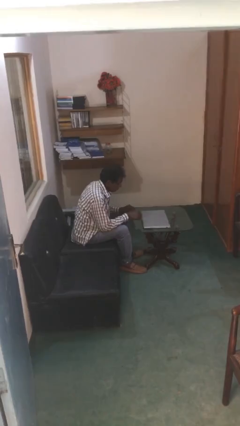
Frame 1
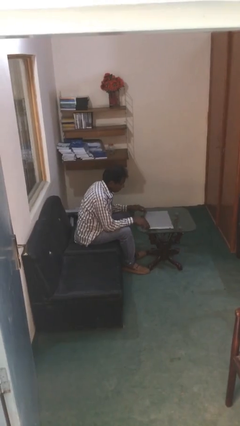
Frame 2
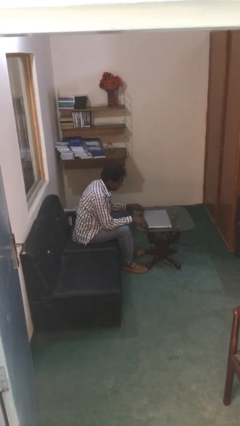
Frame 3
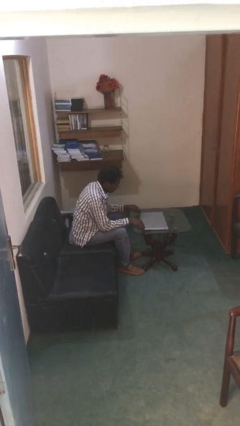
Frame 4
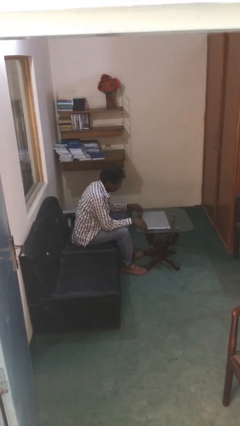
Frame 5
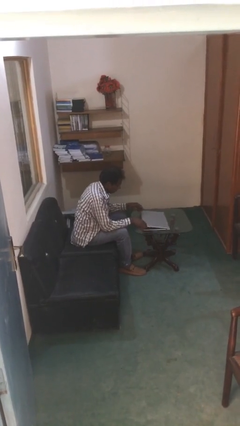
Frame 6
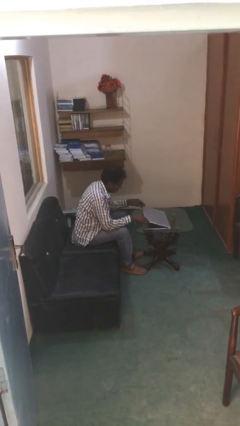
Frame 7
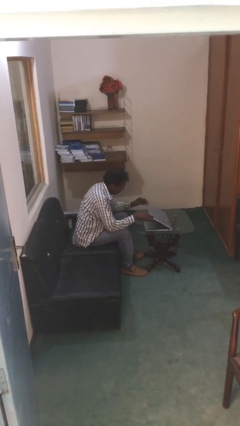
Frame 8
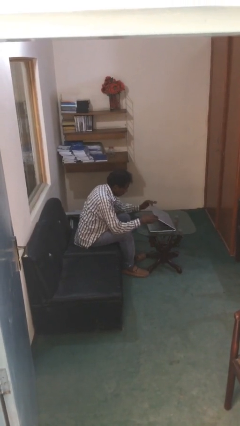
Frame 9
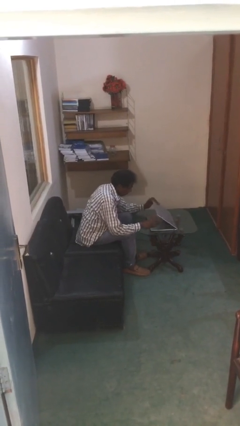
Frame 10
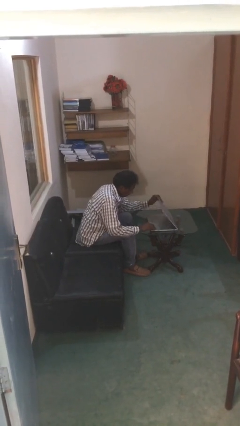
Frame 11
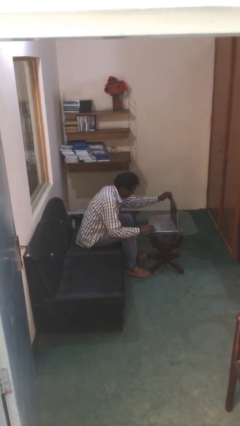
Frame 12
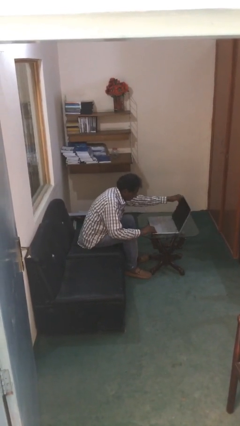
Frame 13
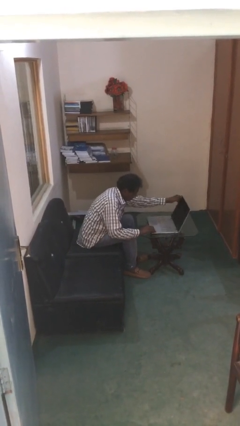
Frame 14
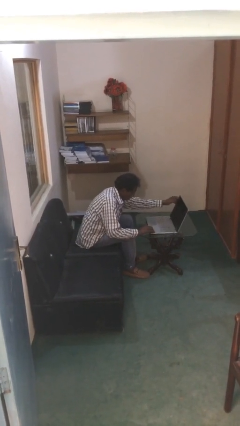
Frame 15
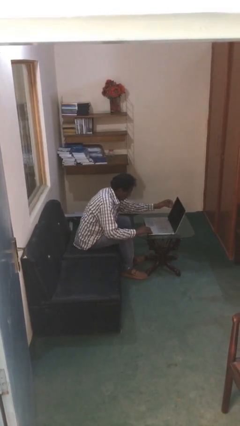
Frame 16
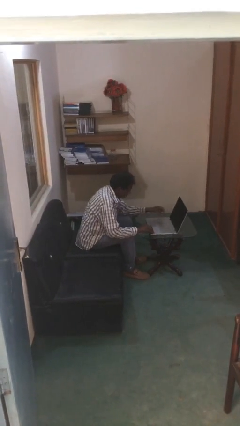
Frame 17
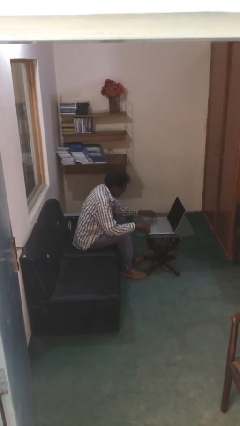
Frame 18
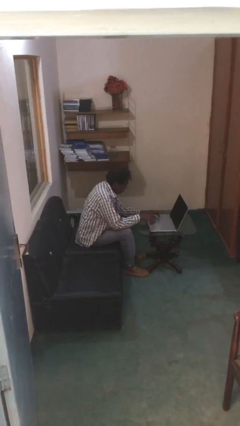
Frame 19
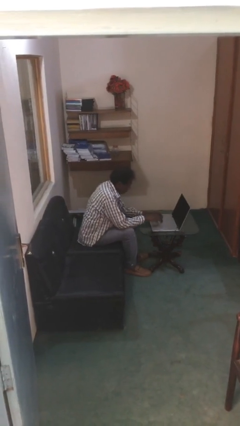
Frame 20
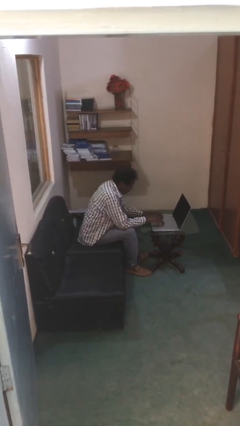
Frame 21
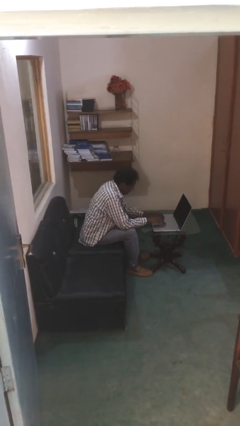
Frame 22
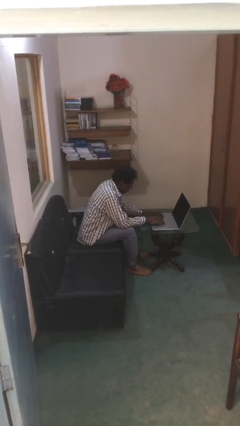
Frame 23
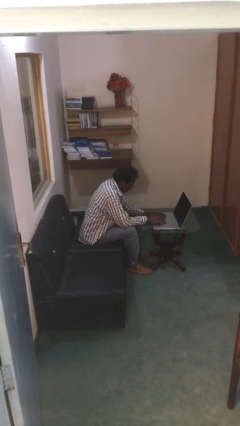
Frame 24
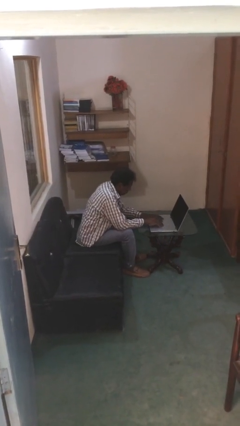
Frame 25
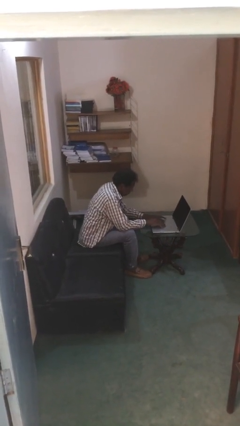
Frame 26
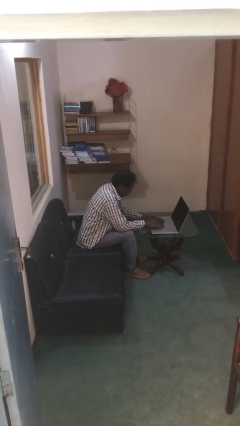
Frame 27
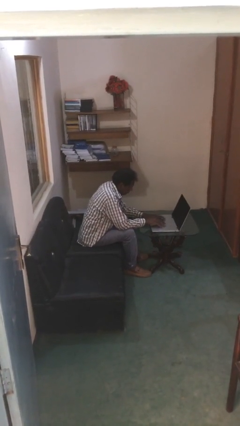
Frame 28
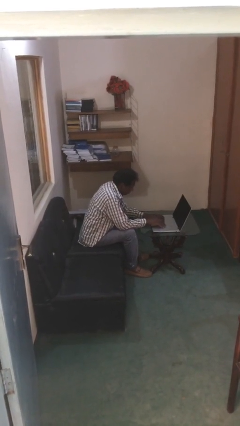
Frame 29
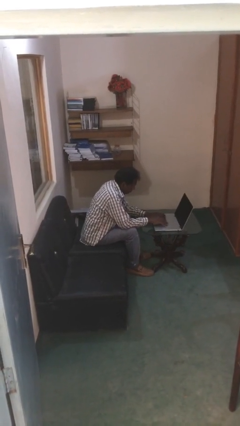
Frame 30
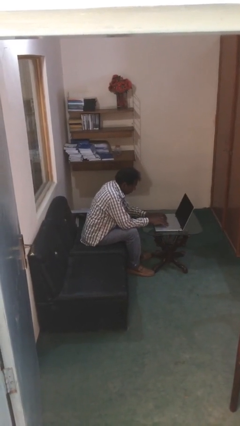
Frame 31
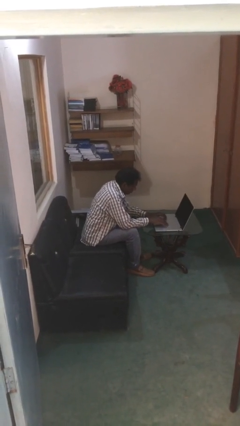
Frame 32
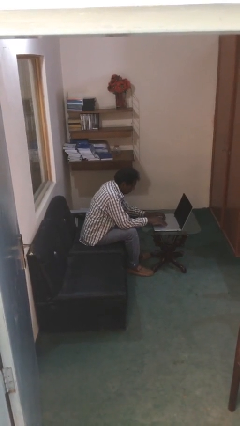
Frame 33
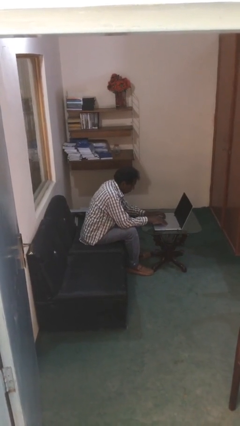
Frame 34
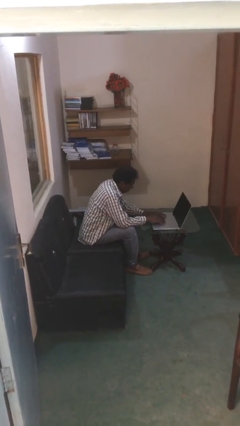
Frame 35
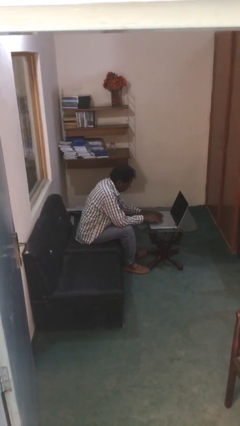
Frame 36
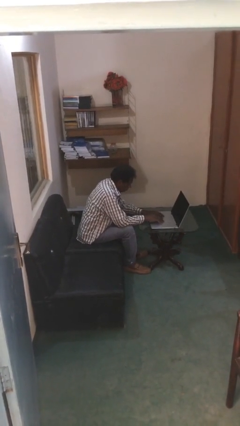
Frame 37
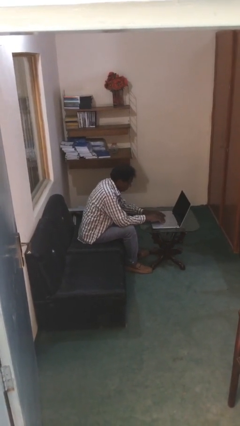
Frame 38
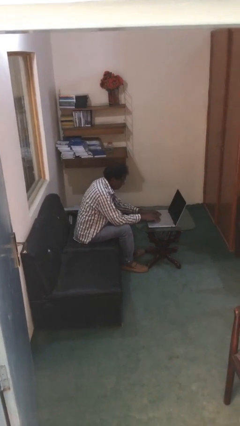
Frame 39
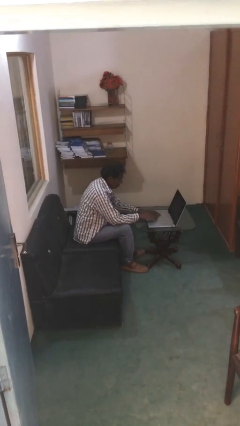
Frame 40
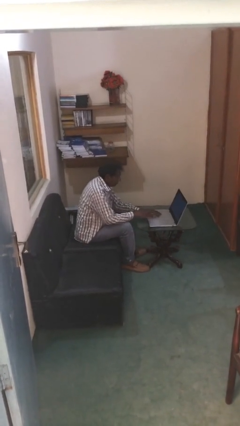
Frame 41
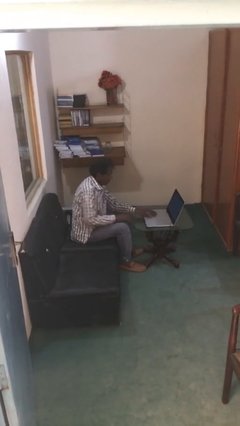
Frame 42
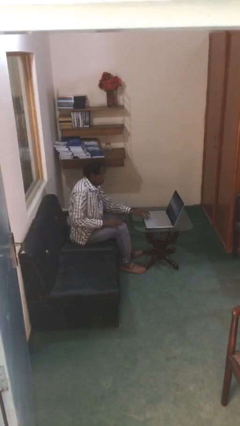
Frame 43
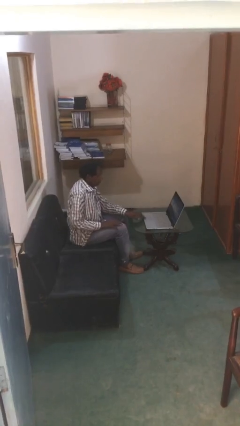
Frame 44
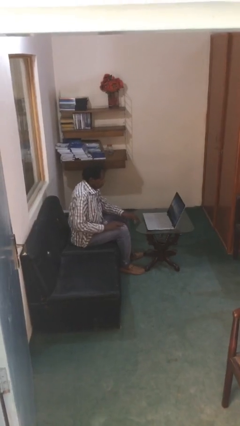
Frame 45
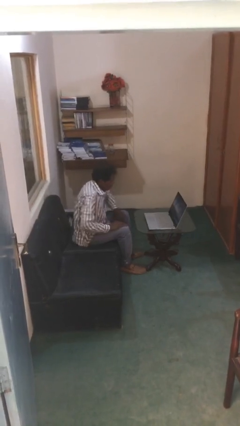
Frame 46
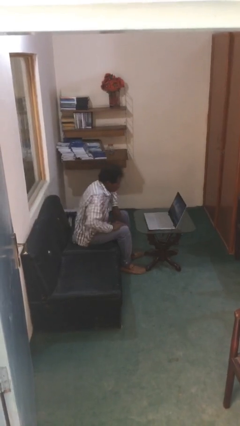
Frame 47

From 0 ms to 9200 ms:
person interacts with laptop

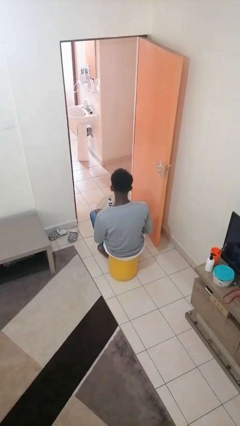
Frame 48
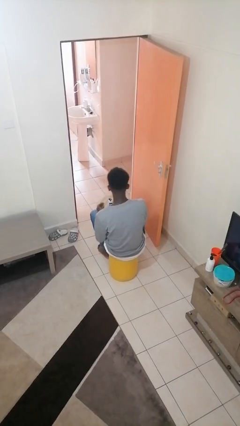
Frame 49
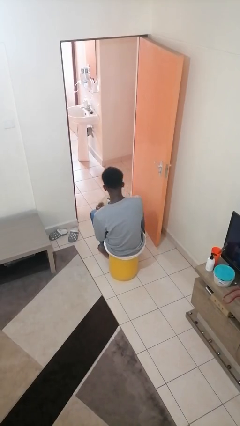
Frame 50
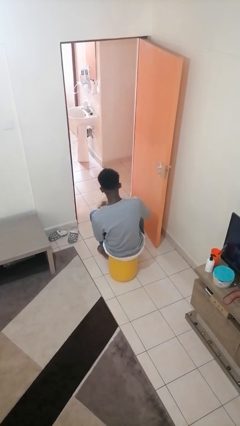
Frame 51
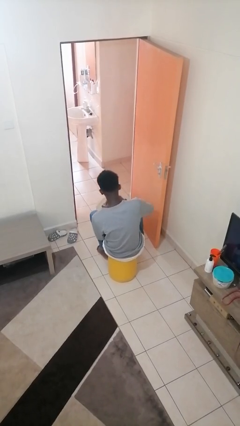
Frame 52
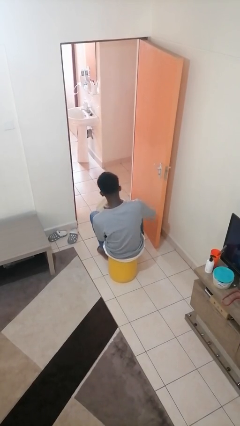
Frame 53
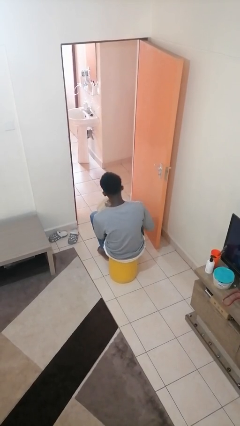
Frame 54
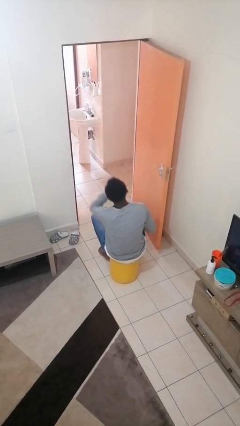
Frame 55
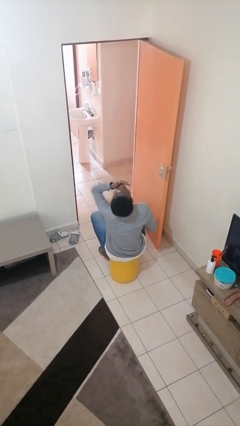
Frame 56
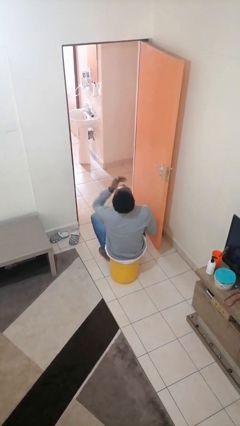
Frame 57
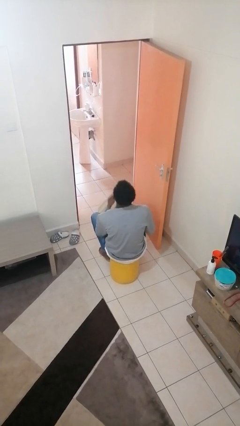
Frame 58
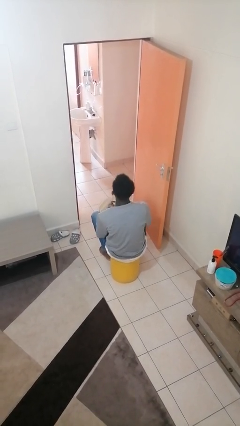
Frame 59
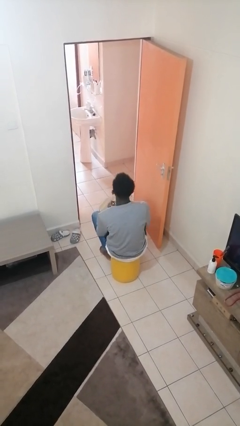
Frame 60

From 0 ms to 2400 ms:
person takes medicine pills

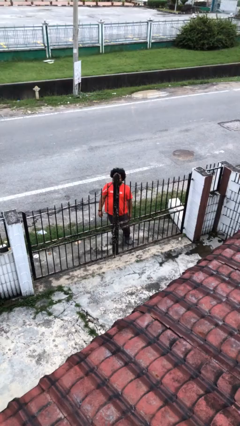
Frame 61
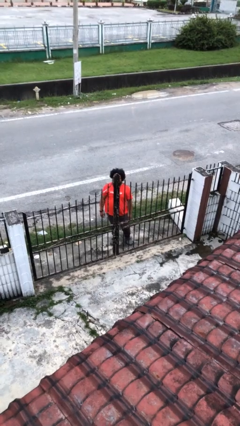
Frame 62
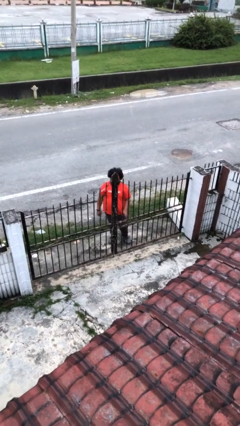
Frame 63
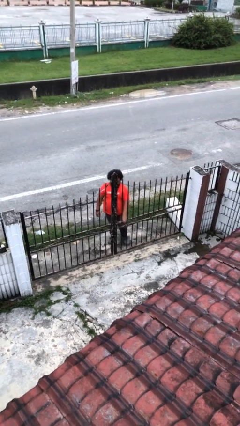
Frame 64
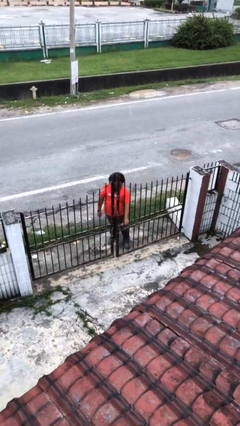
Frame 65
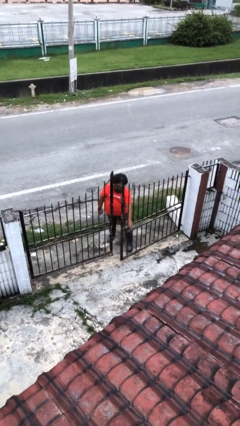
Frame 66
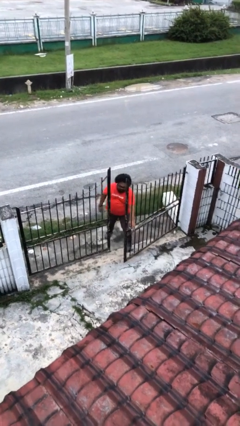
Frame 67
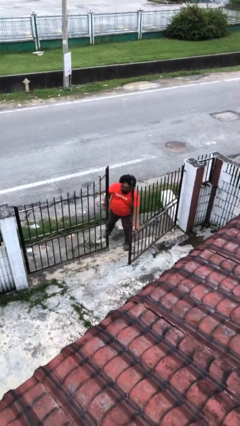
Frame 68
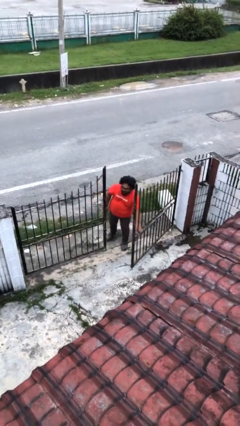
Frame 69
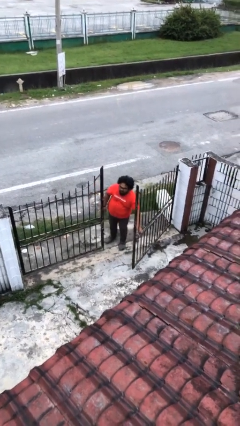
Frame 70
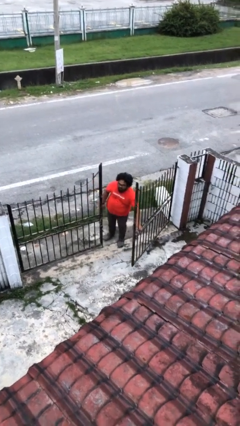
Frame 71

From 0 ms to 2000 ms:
person opens facility door

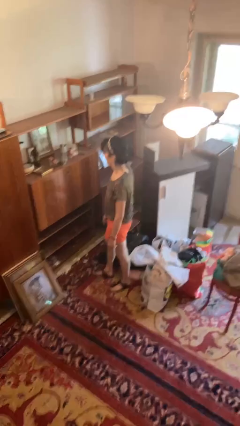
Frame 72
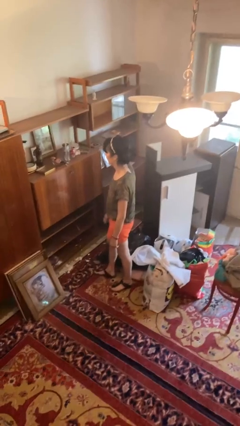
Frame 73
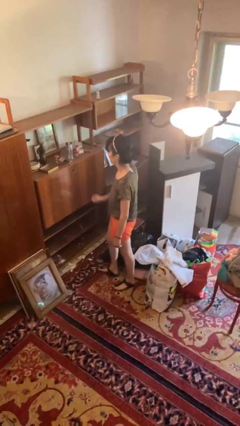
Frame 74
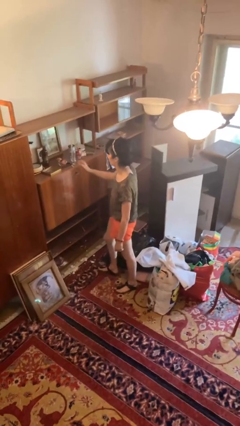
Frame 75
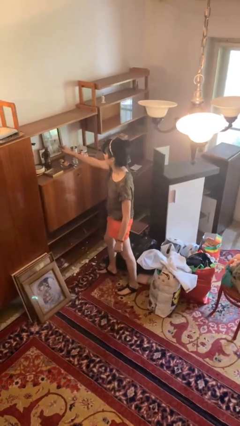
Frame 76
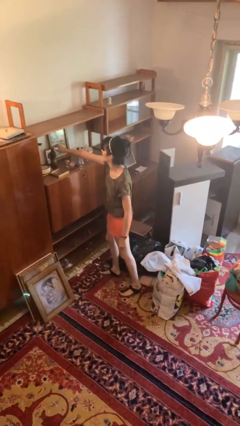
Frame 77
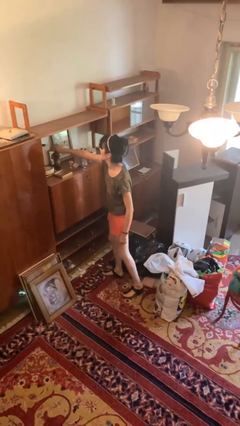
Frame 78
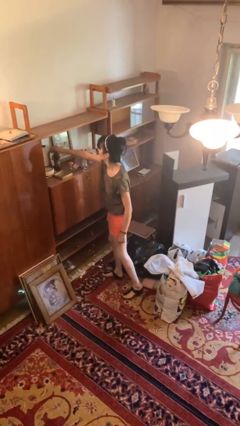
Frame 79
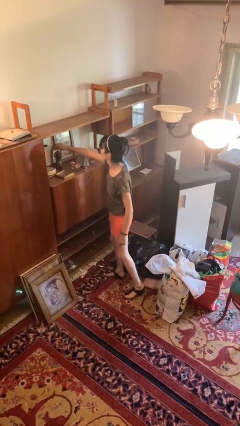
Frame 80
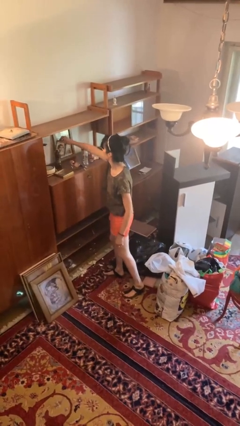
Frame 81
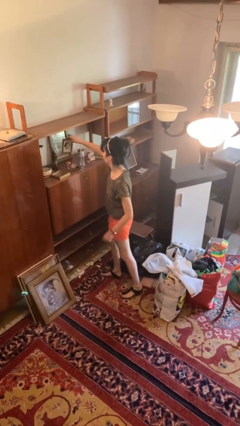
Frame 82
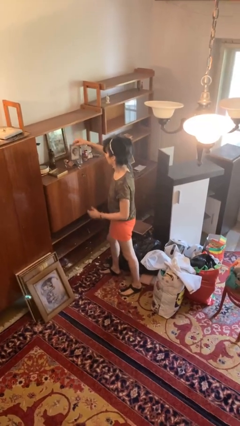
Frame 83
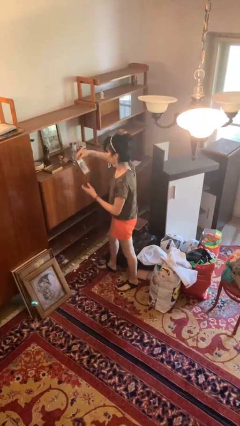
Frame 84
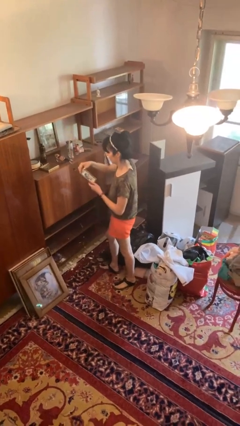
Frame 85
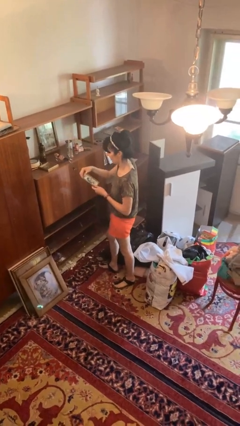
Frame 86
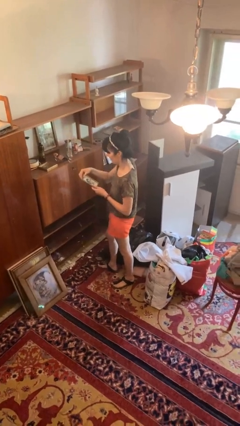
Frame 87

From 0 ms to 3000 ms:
person picks up object from countertop

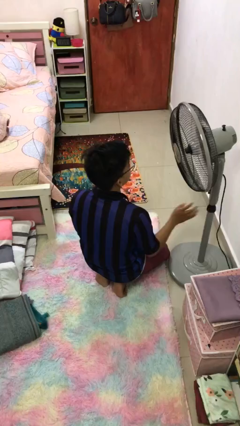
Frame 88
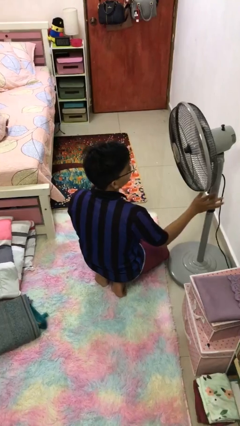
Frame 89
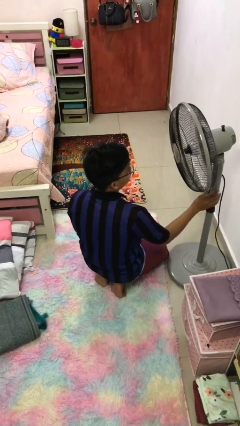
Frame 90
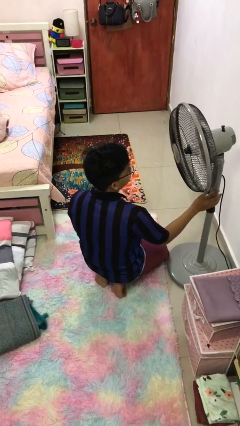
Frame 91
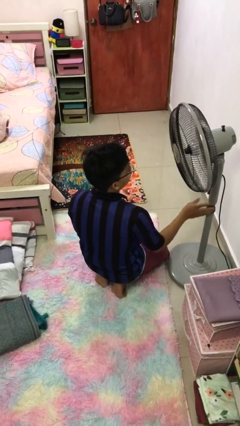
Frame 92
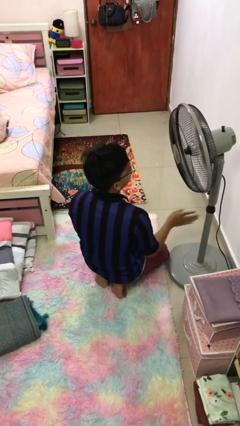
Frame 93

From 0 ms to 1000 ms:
person turns off fan
